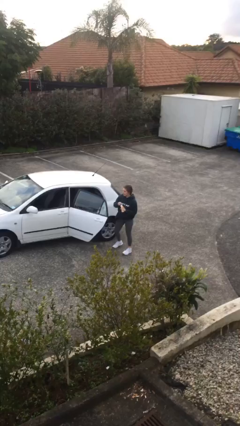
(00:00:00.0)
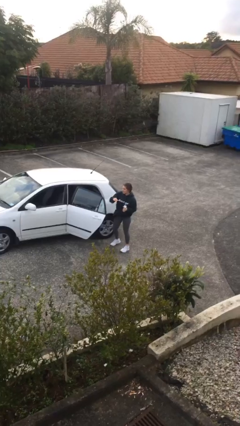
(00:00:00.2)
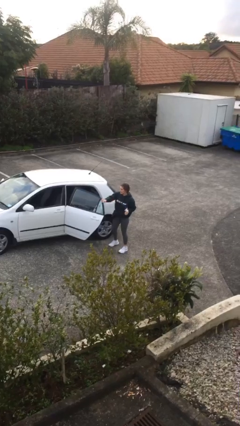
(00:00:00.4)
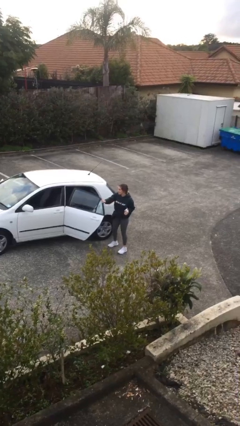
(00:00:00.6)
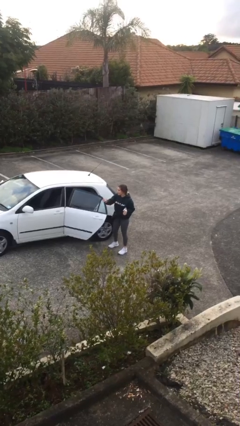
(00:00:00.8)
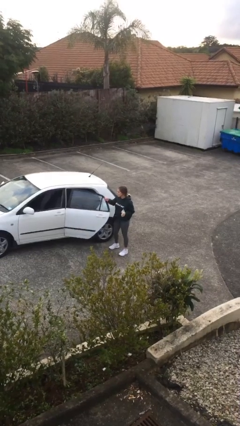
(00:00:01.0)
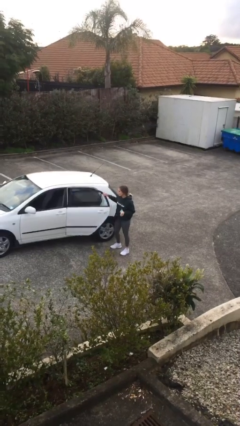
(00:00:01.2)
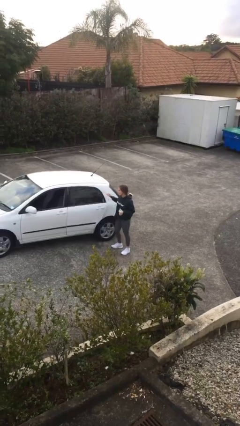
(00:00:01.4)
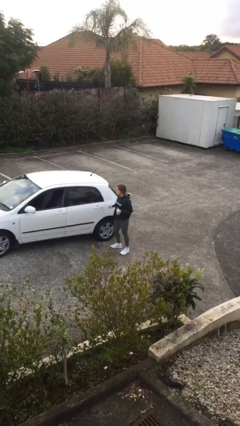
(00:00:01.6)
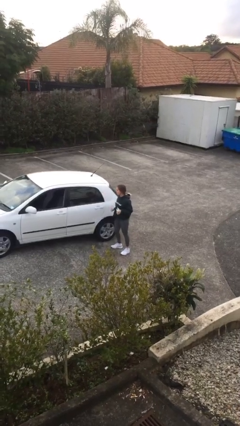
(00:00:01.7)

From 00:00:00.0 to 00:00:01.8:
person closes car door

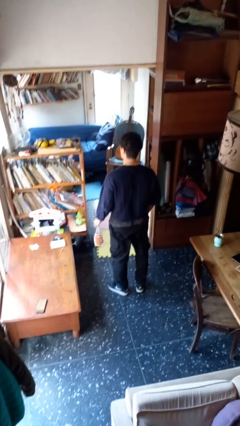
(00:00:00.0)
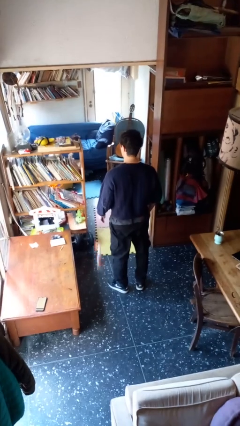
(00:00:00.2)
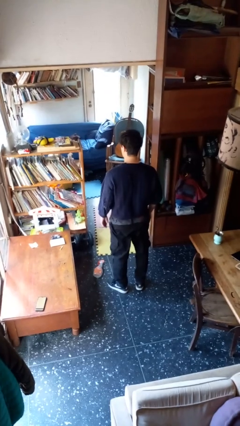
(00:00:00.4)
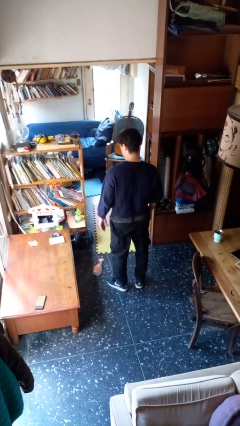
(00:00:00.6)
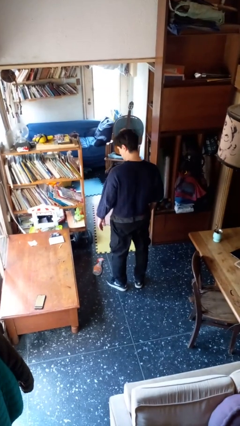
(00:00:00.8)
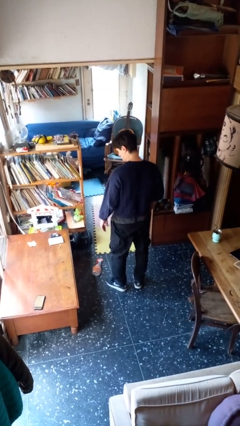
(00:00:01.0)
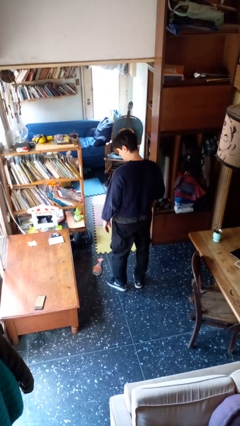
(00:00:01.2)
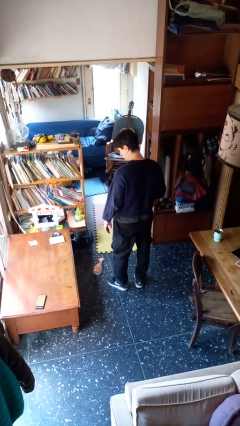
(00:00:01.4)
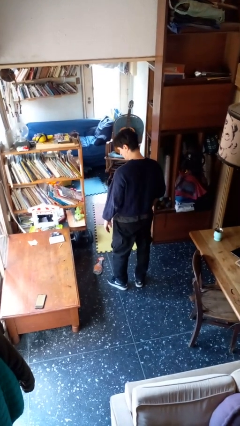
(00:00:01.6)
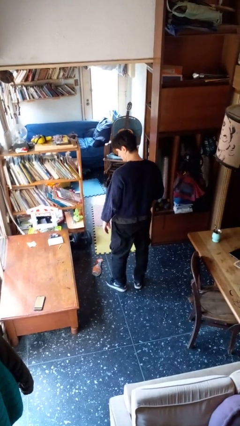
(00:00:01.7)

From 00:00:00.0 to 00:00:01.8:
person drops object

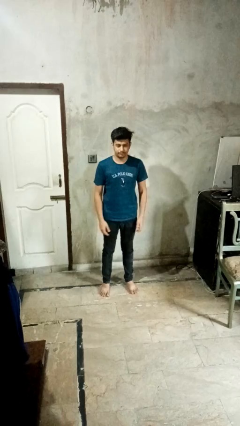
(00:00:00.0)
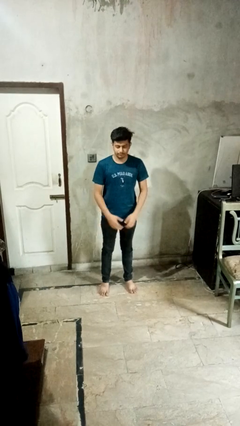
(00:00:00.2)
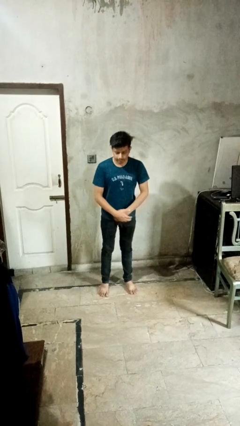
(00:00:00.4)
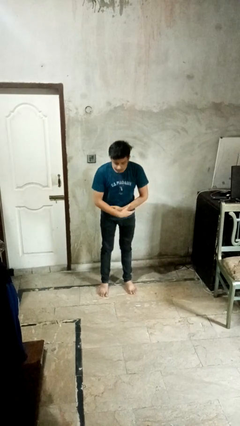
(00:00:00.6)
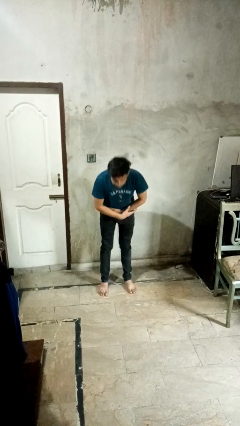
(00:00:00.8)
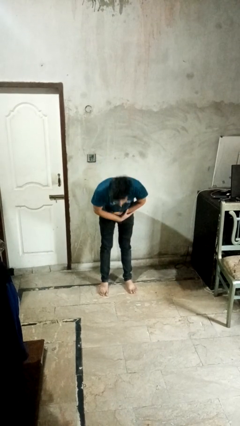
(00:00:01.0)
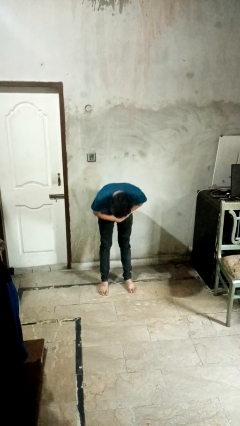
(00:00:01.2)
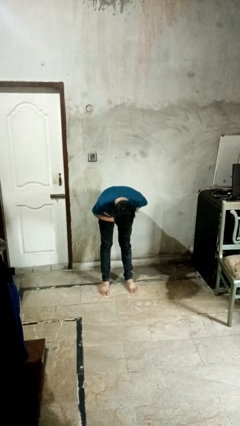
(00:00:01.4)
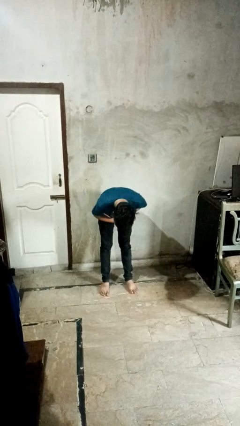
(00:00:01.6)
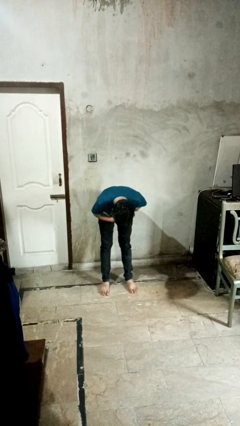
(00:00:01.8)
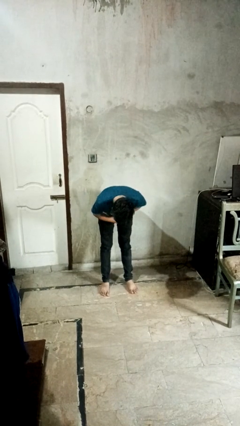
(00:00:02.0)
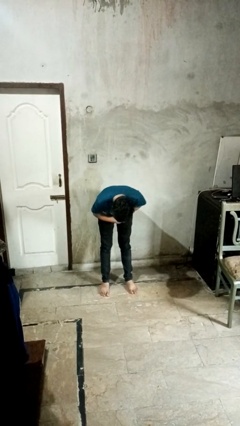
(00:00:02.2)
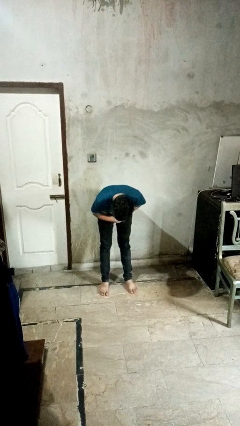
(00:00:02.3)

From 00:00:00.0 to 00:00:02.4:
person bows

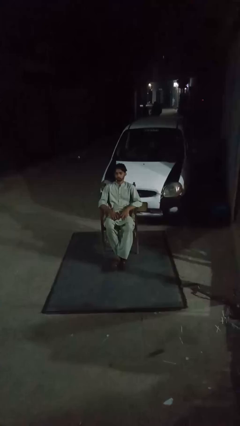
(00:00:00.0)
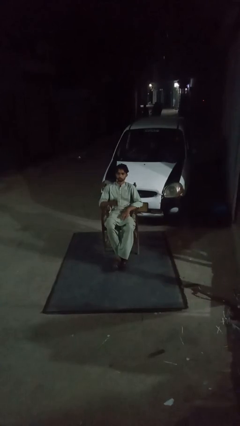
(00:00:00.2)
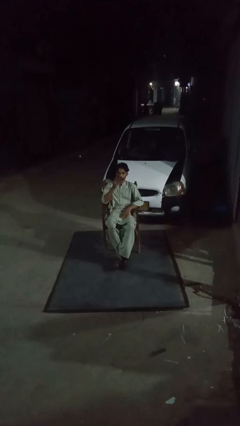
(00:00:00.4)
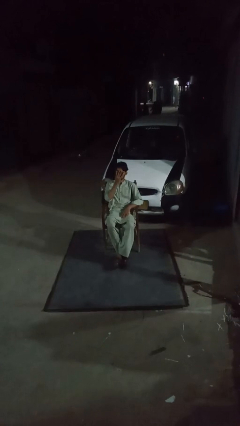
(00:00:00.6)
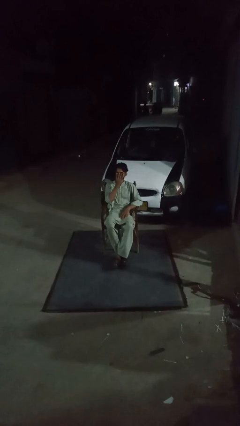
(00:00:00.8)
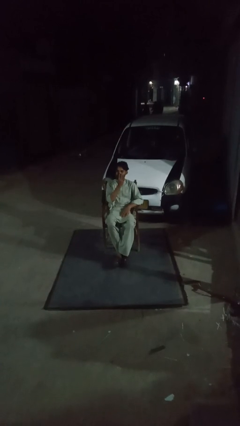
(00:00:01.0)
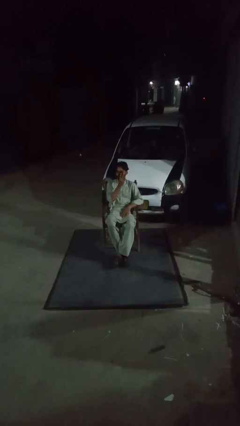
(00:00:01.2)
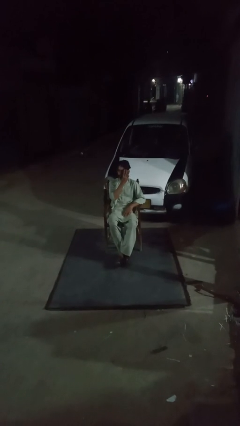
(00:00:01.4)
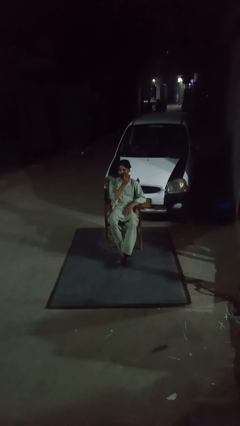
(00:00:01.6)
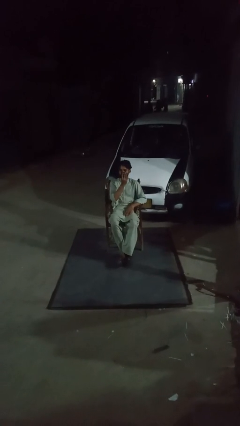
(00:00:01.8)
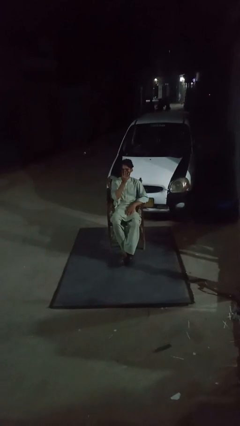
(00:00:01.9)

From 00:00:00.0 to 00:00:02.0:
person wipes mouth with napkin

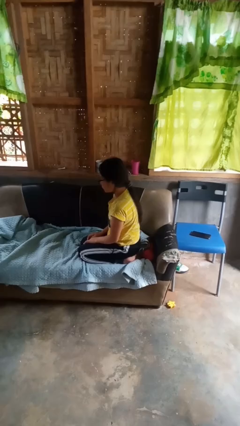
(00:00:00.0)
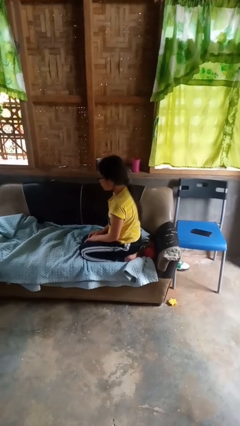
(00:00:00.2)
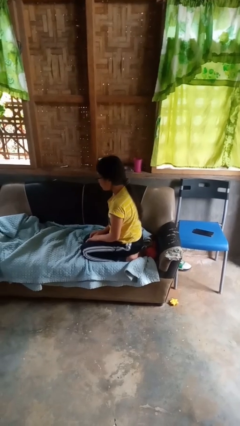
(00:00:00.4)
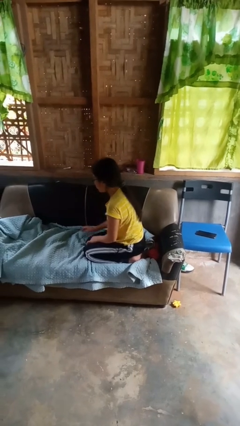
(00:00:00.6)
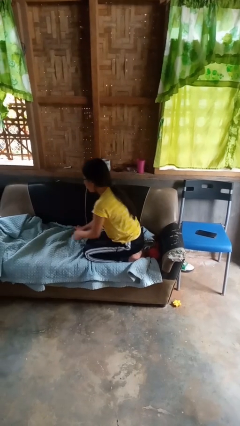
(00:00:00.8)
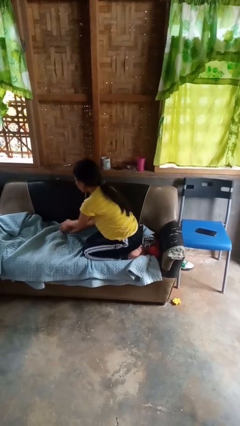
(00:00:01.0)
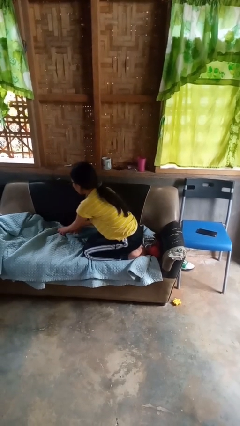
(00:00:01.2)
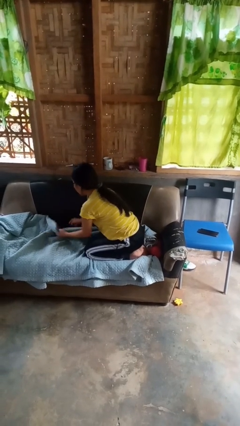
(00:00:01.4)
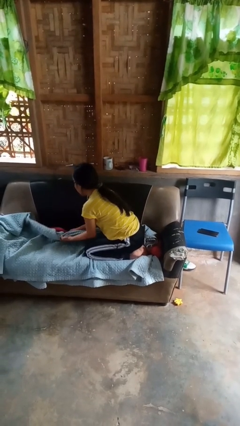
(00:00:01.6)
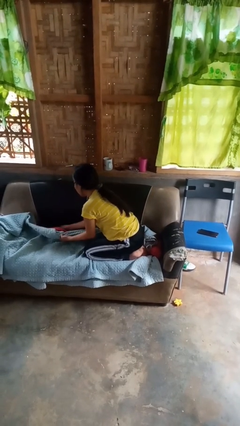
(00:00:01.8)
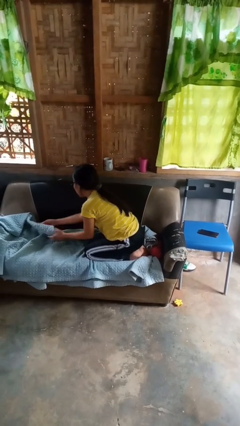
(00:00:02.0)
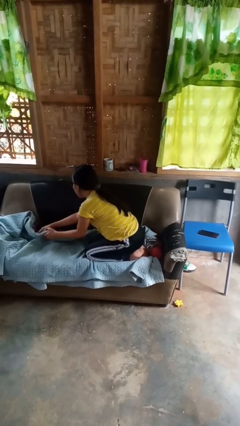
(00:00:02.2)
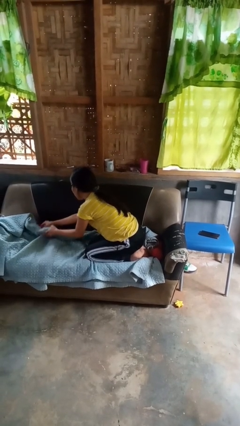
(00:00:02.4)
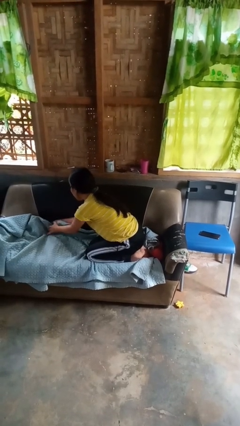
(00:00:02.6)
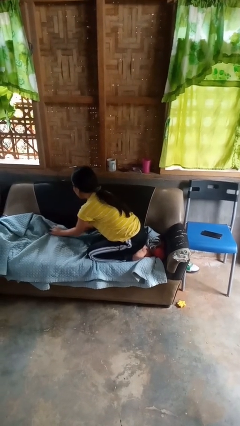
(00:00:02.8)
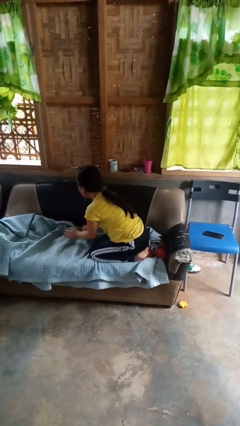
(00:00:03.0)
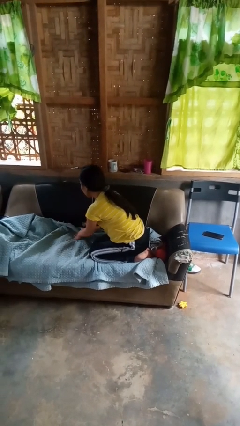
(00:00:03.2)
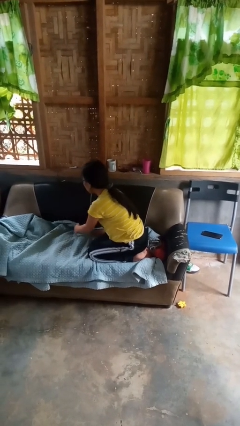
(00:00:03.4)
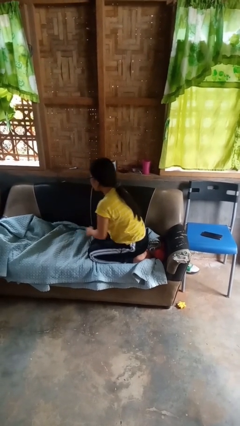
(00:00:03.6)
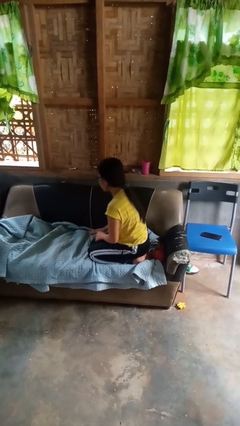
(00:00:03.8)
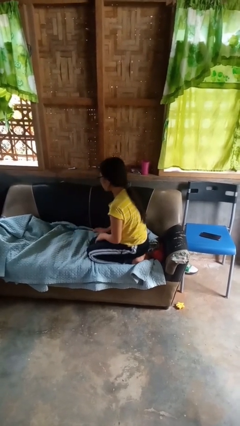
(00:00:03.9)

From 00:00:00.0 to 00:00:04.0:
person searches in couch

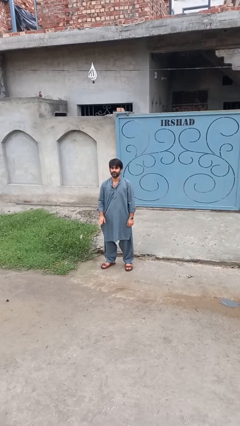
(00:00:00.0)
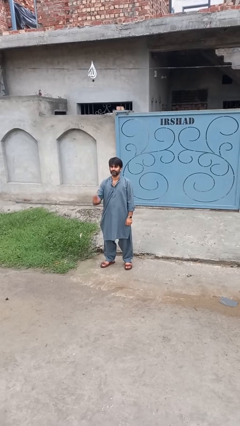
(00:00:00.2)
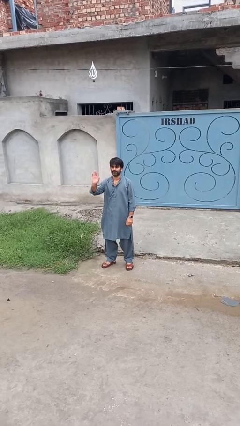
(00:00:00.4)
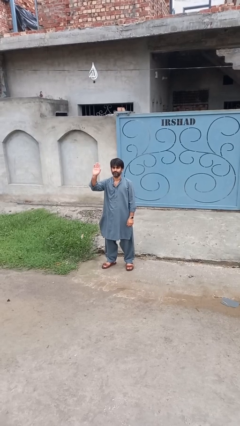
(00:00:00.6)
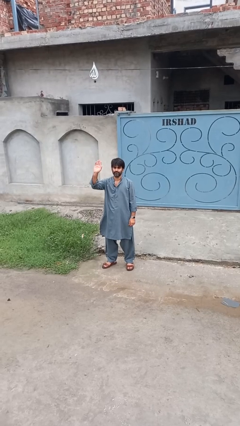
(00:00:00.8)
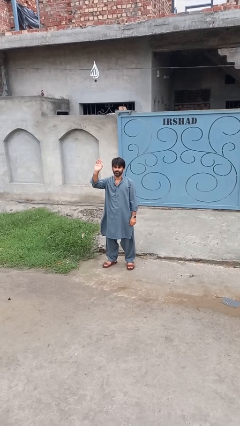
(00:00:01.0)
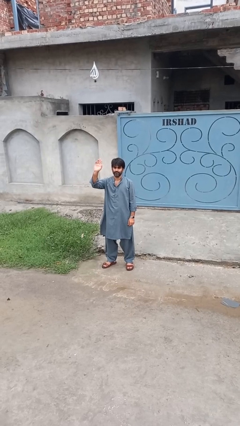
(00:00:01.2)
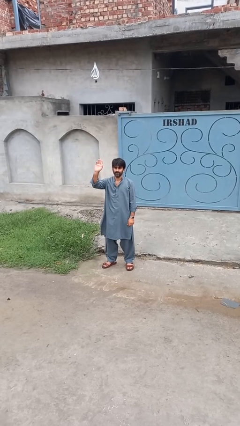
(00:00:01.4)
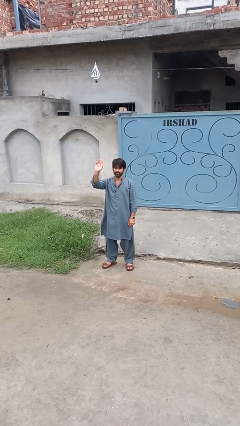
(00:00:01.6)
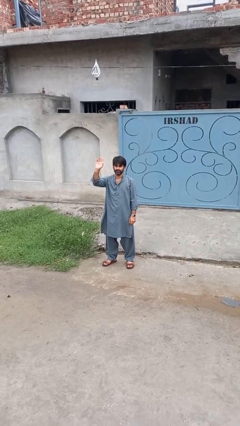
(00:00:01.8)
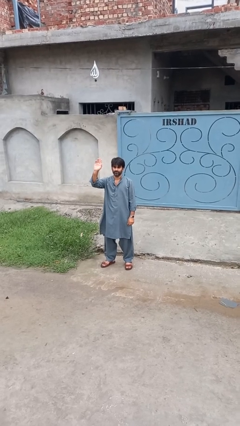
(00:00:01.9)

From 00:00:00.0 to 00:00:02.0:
person gestures raise hand

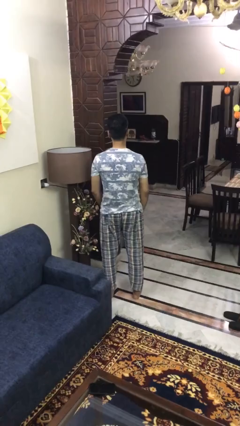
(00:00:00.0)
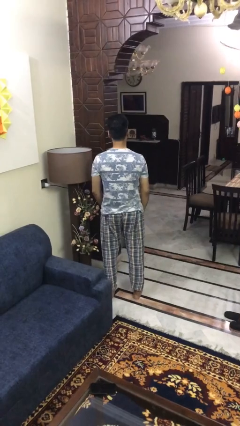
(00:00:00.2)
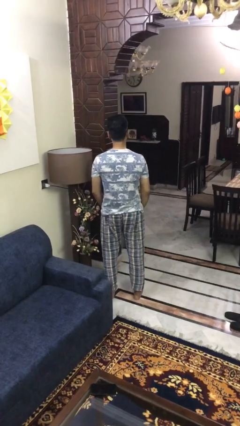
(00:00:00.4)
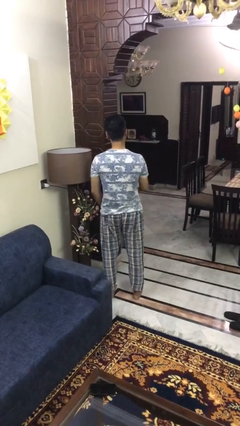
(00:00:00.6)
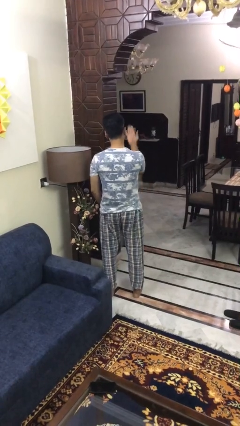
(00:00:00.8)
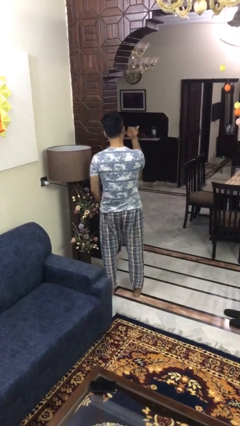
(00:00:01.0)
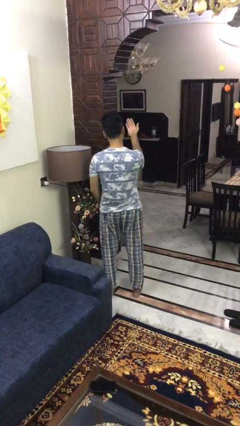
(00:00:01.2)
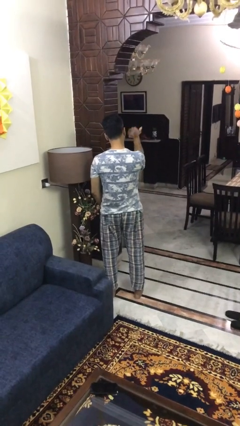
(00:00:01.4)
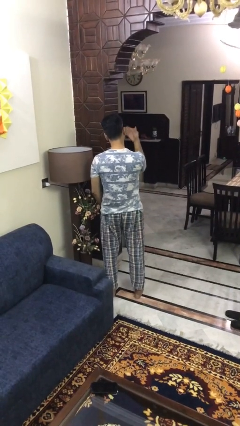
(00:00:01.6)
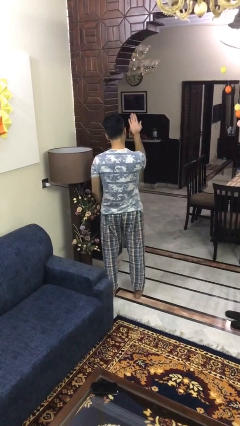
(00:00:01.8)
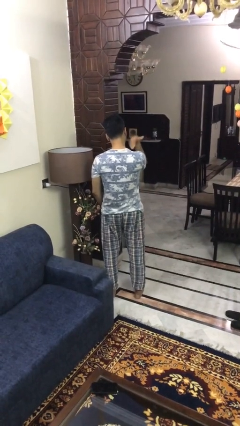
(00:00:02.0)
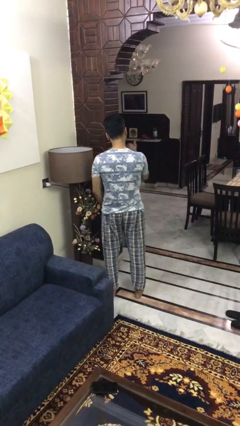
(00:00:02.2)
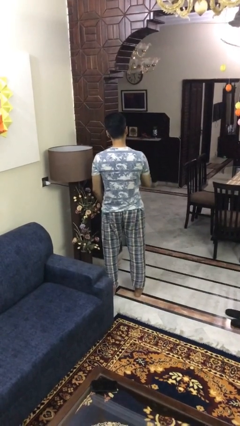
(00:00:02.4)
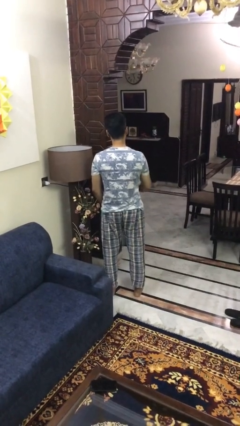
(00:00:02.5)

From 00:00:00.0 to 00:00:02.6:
person gestures come here
